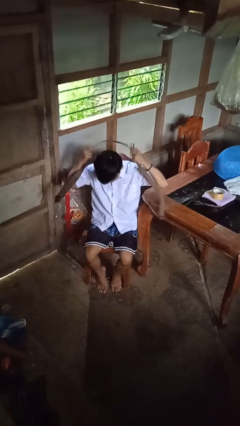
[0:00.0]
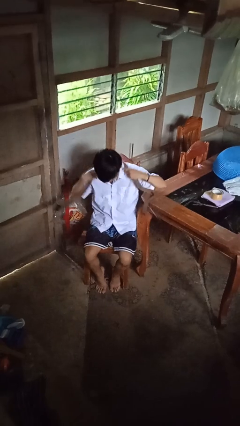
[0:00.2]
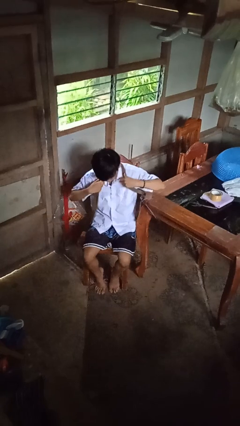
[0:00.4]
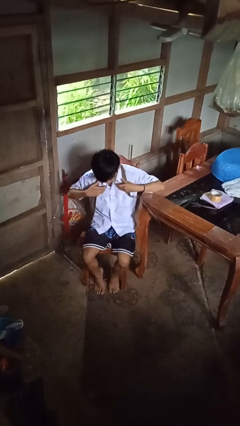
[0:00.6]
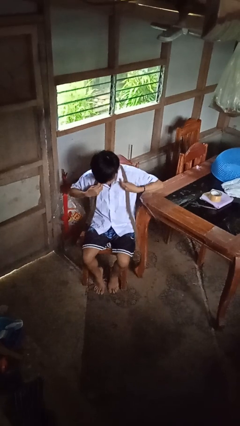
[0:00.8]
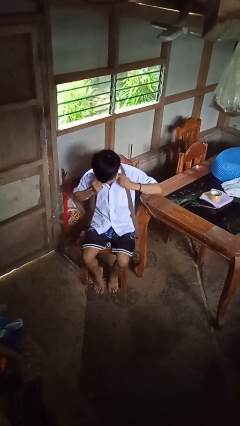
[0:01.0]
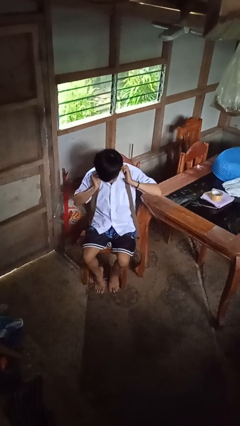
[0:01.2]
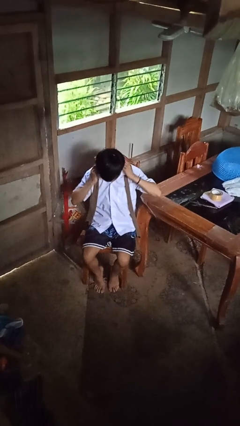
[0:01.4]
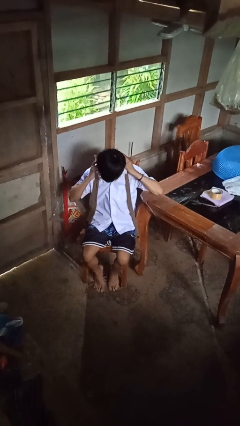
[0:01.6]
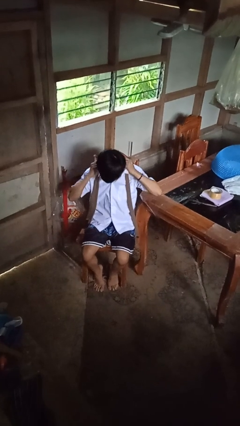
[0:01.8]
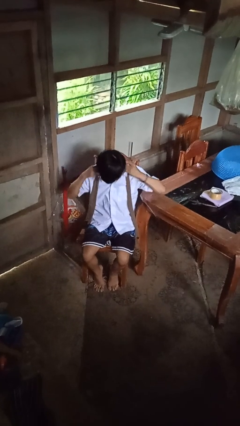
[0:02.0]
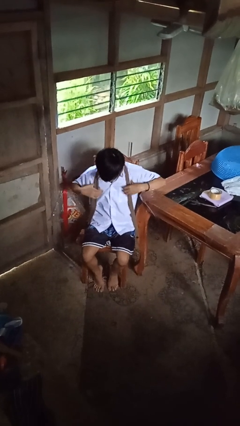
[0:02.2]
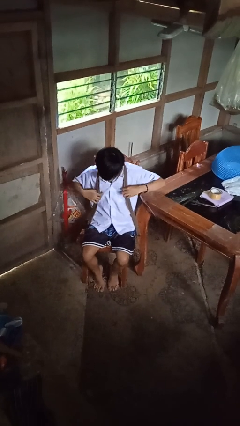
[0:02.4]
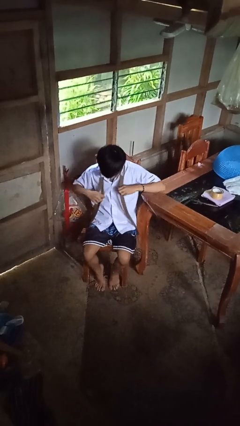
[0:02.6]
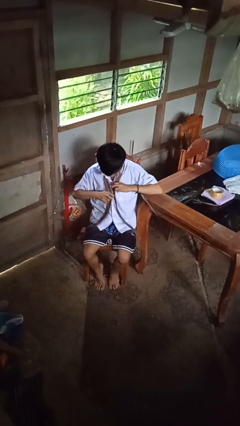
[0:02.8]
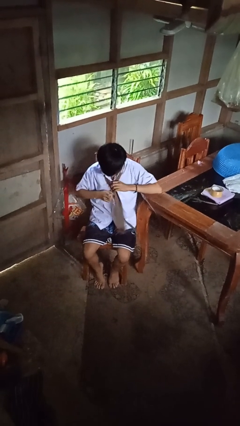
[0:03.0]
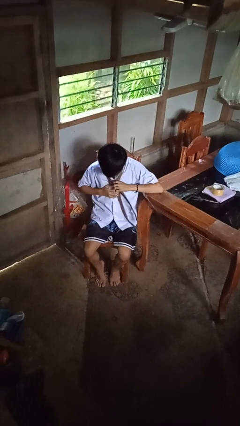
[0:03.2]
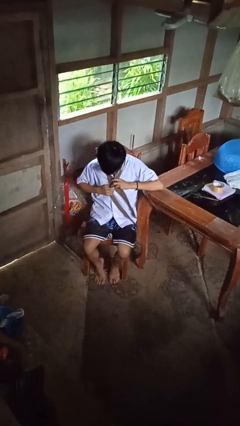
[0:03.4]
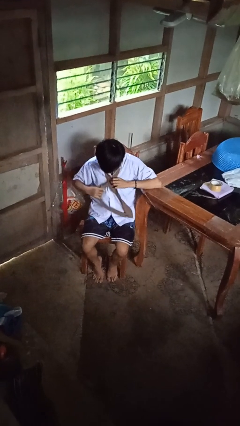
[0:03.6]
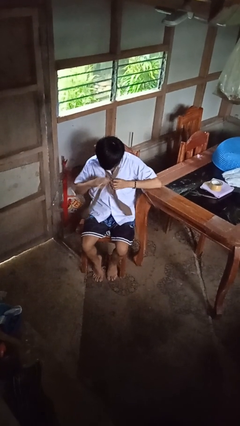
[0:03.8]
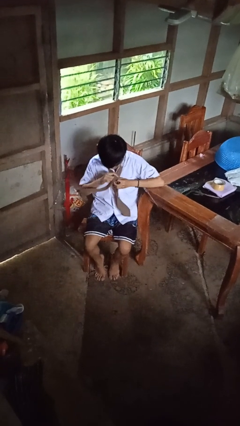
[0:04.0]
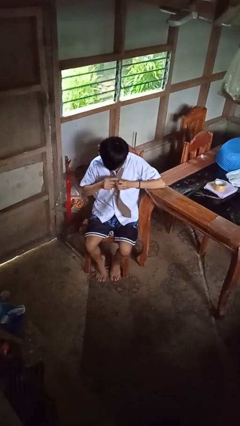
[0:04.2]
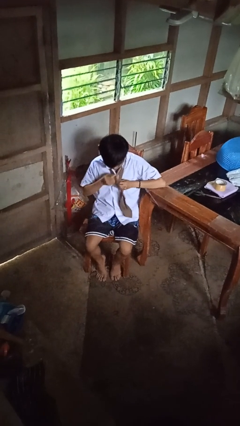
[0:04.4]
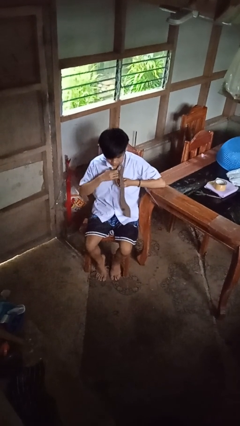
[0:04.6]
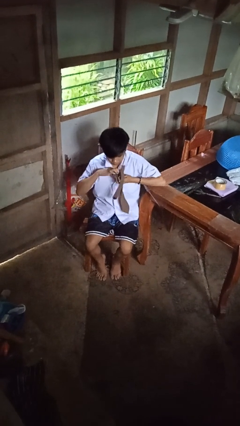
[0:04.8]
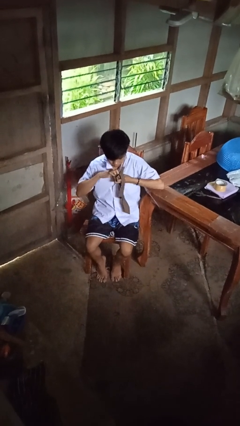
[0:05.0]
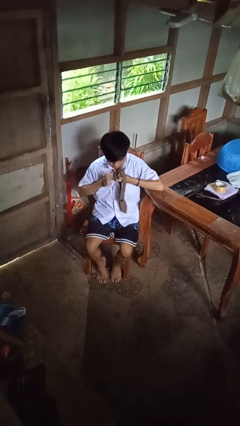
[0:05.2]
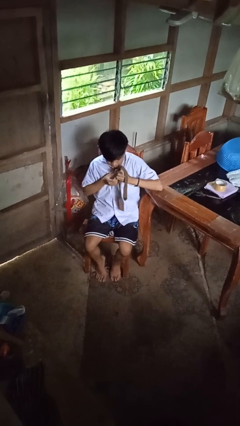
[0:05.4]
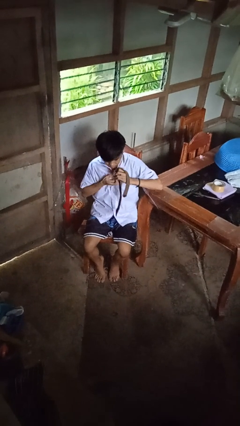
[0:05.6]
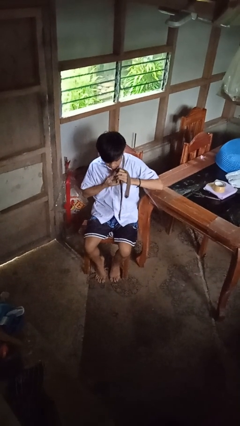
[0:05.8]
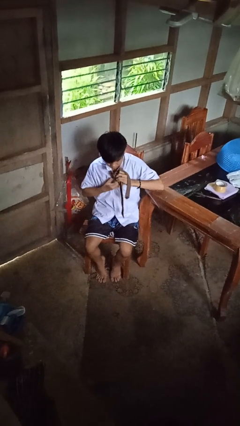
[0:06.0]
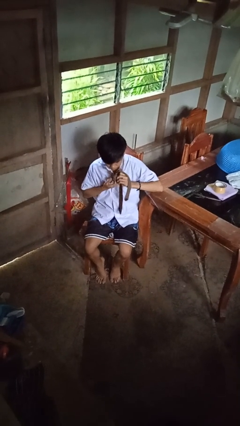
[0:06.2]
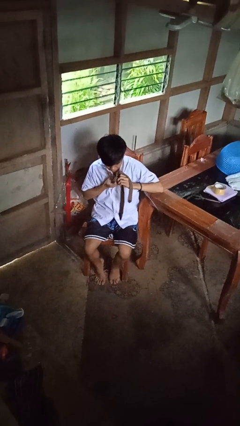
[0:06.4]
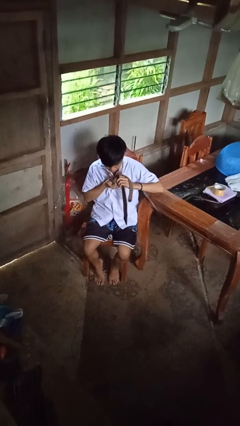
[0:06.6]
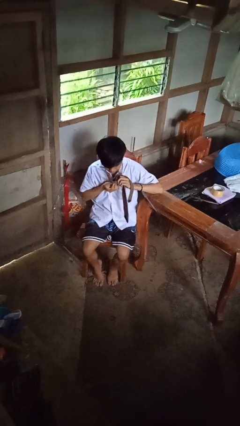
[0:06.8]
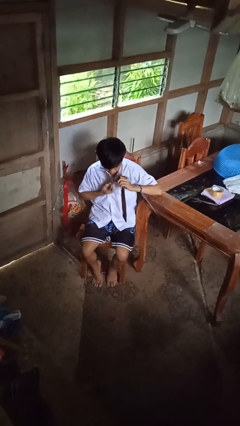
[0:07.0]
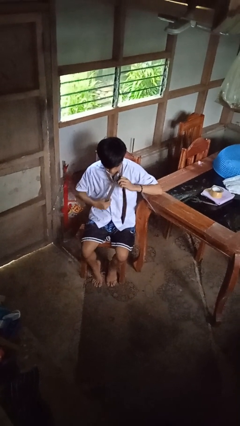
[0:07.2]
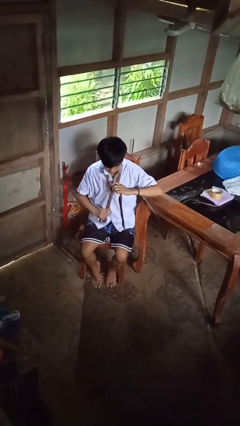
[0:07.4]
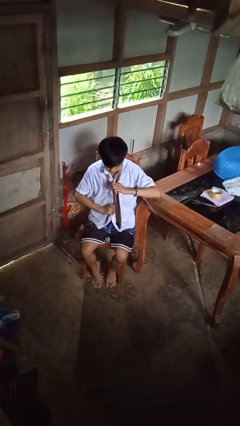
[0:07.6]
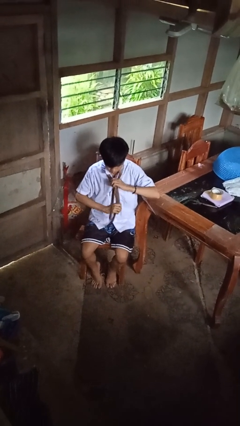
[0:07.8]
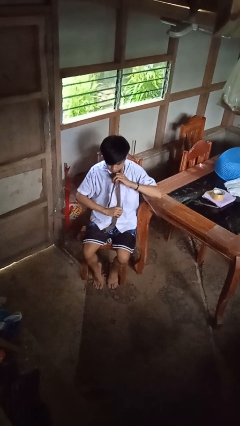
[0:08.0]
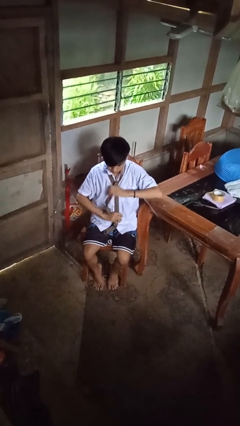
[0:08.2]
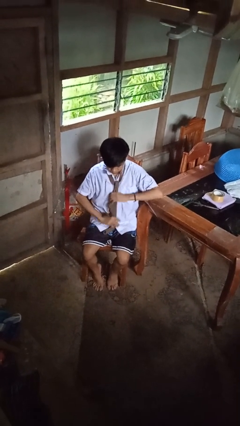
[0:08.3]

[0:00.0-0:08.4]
person puts on necktie

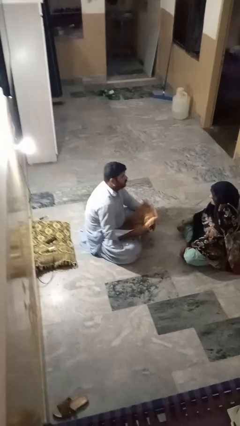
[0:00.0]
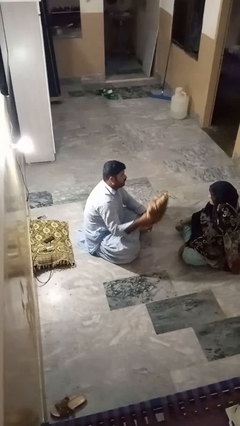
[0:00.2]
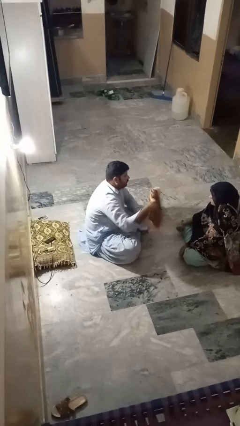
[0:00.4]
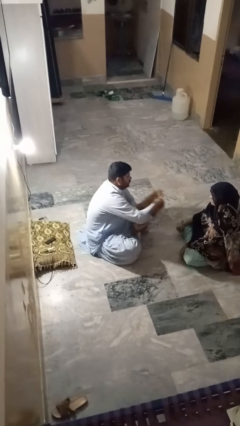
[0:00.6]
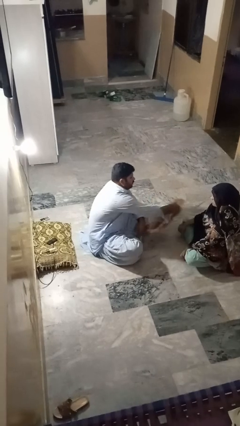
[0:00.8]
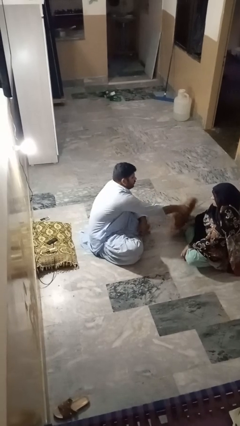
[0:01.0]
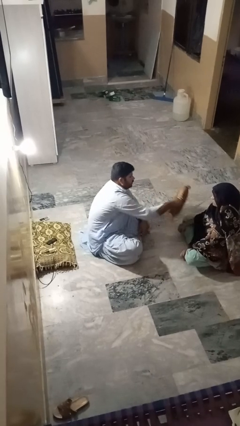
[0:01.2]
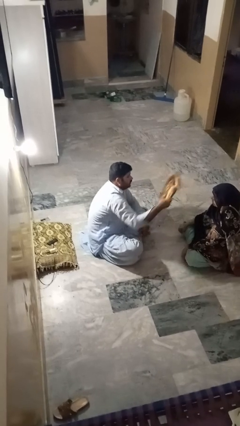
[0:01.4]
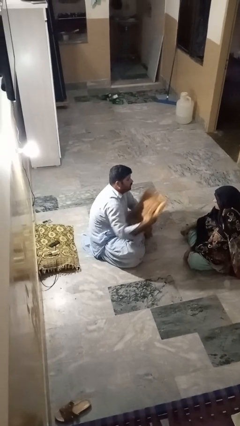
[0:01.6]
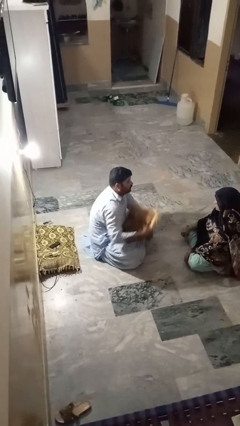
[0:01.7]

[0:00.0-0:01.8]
person hits person with pillow

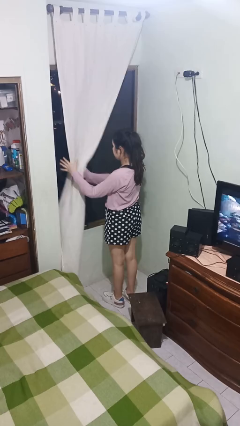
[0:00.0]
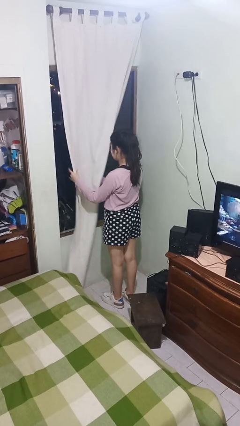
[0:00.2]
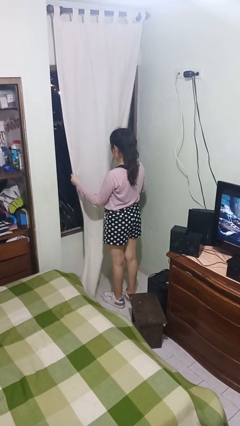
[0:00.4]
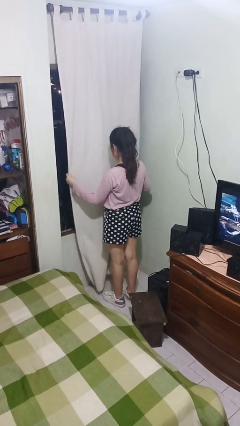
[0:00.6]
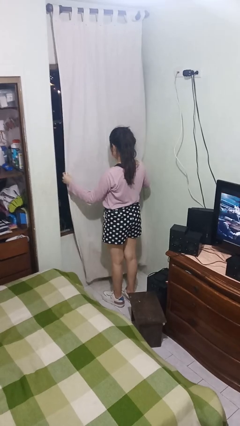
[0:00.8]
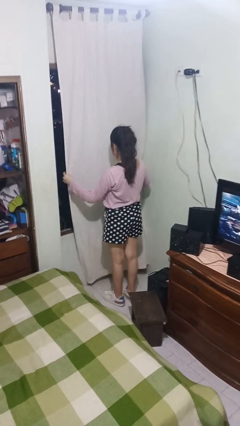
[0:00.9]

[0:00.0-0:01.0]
person closes curtains

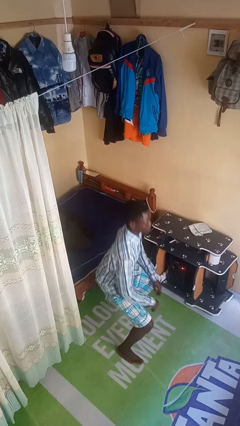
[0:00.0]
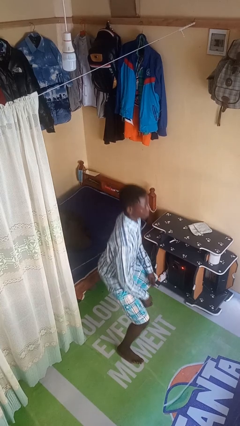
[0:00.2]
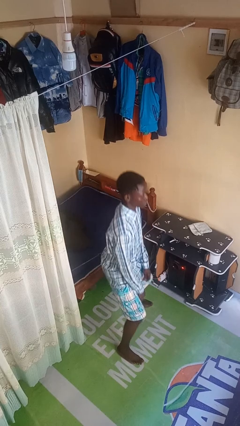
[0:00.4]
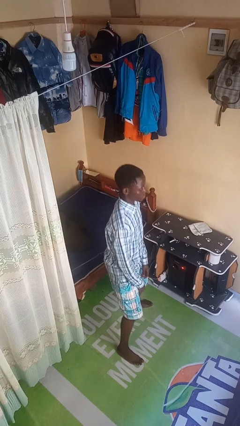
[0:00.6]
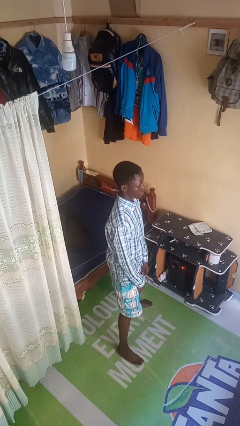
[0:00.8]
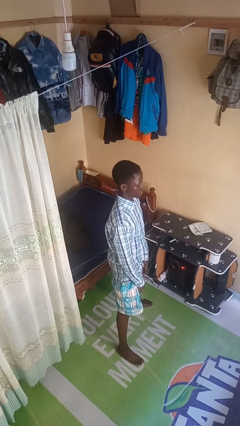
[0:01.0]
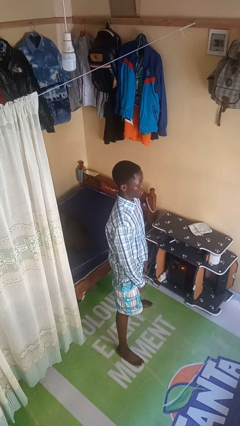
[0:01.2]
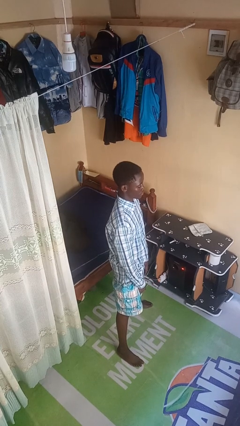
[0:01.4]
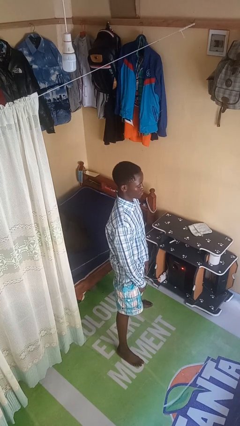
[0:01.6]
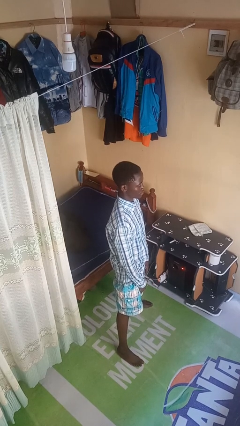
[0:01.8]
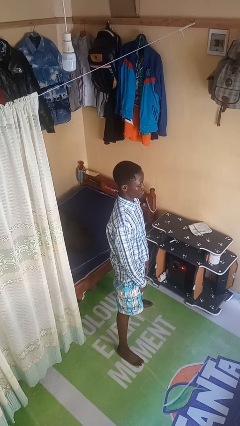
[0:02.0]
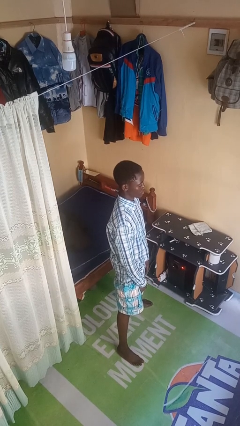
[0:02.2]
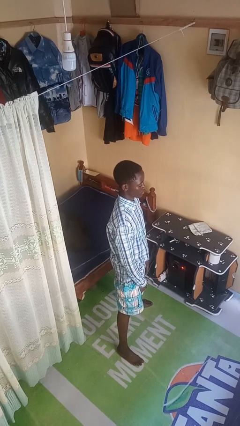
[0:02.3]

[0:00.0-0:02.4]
person stands up

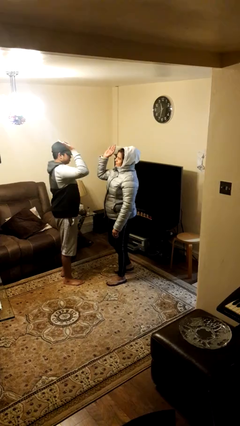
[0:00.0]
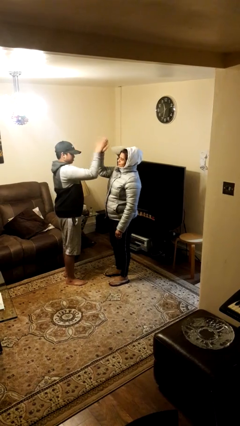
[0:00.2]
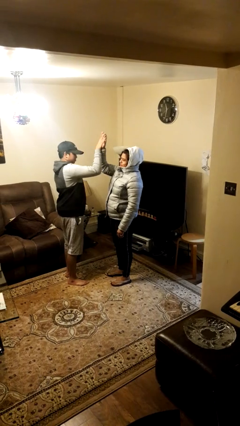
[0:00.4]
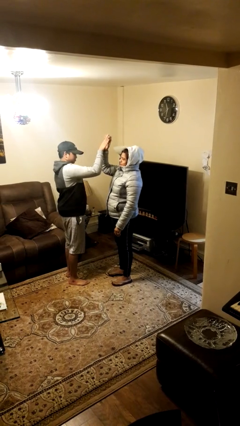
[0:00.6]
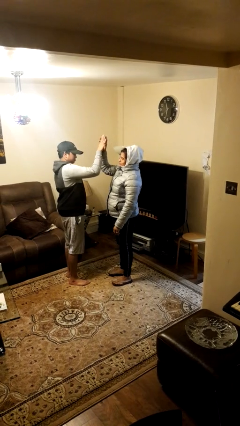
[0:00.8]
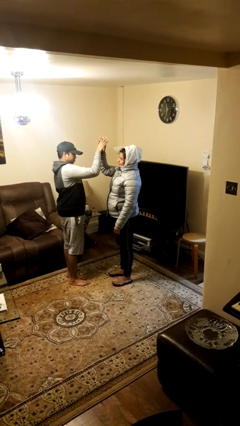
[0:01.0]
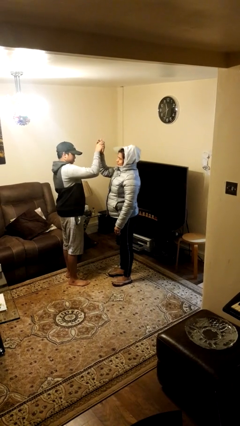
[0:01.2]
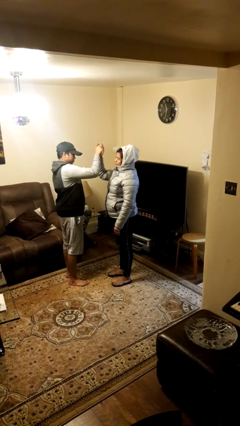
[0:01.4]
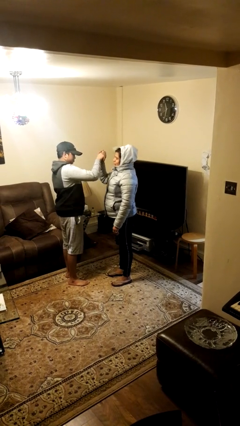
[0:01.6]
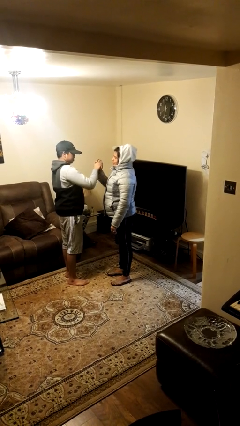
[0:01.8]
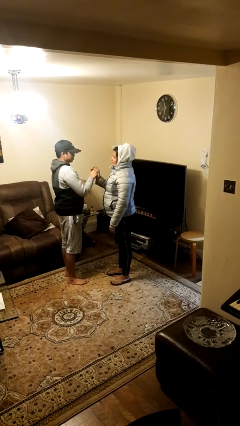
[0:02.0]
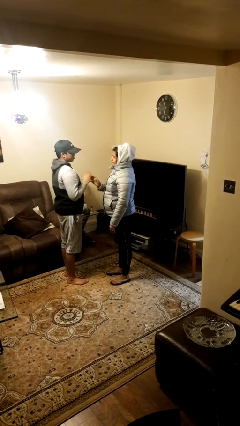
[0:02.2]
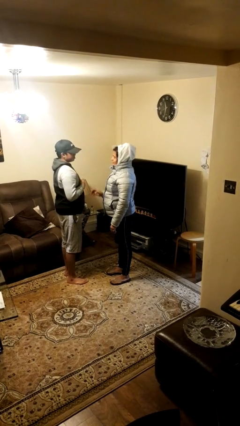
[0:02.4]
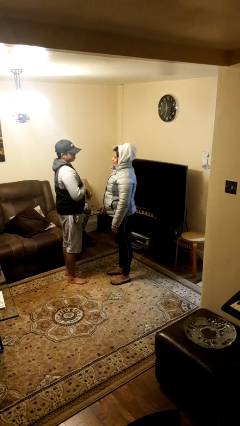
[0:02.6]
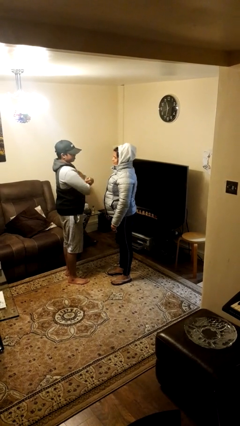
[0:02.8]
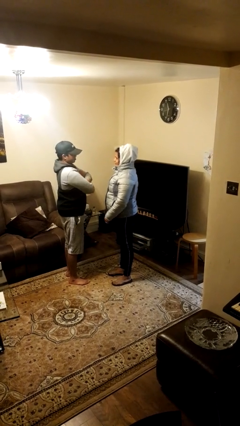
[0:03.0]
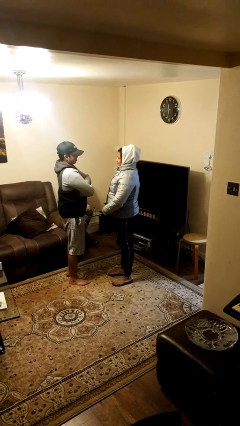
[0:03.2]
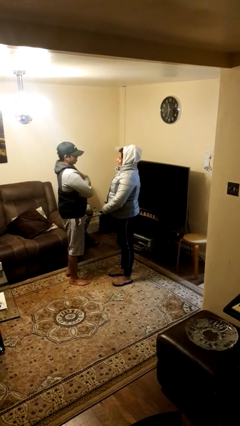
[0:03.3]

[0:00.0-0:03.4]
person highfives hand

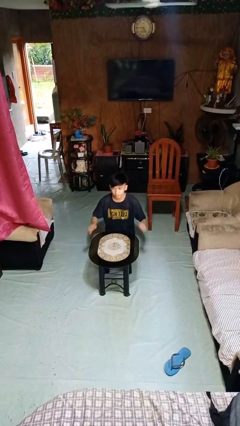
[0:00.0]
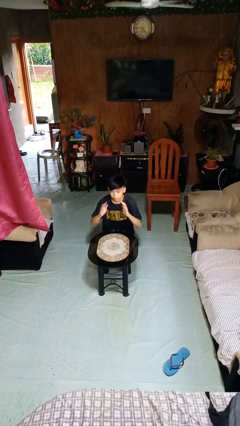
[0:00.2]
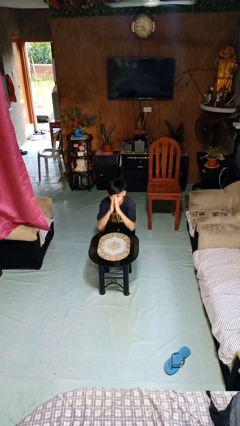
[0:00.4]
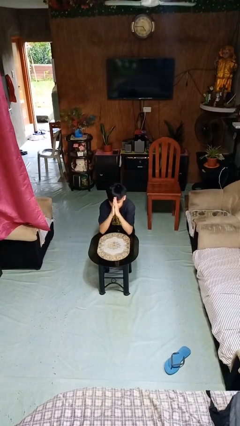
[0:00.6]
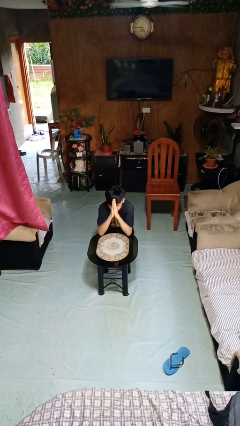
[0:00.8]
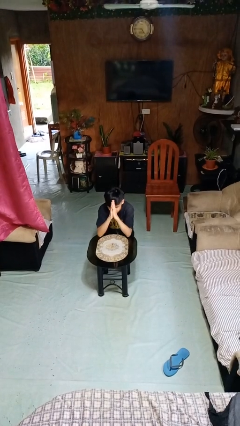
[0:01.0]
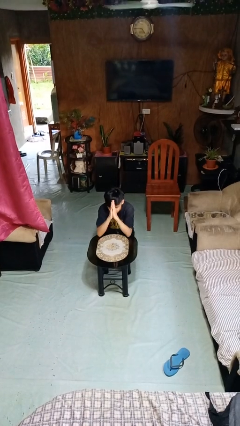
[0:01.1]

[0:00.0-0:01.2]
person prays
